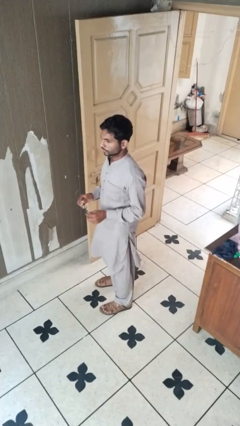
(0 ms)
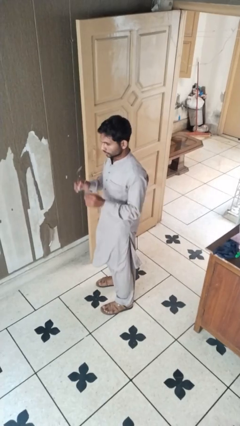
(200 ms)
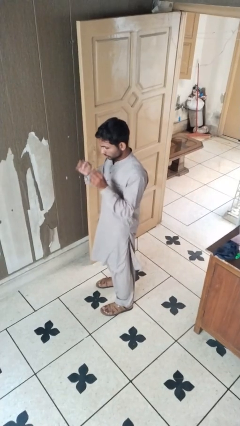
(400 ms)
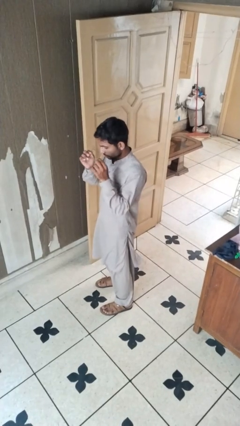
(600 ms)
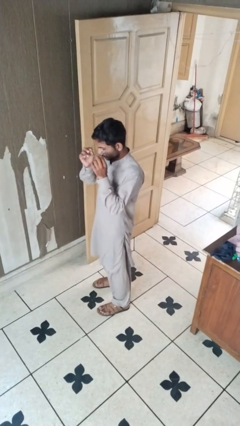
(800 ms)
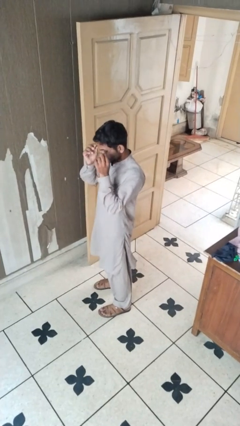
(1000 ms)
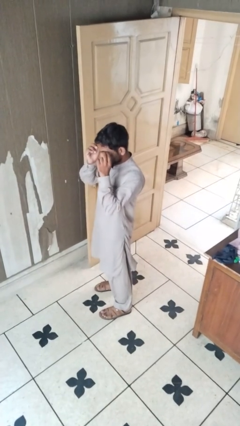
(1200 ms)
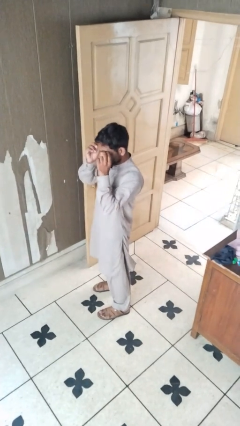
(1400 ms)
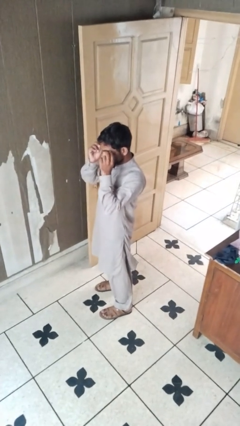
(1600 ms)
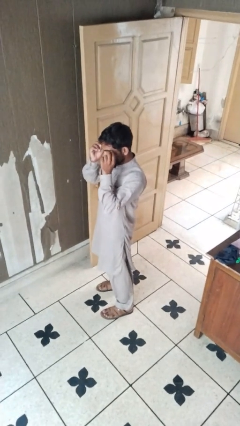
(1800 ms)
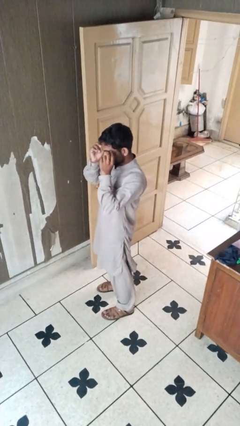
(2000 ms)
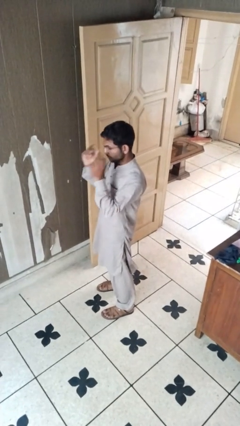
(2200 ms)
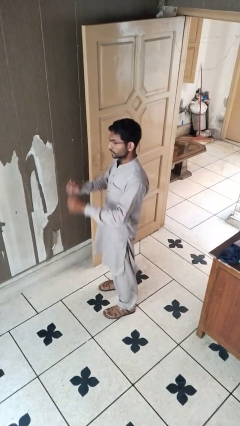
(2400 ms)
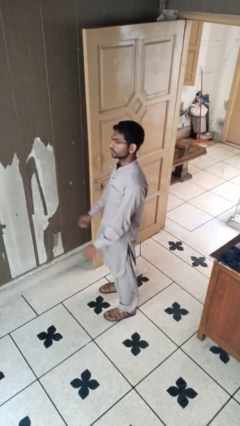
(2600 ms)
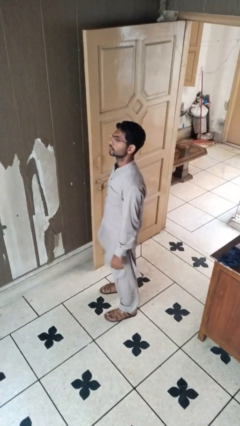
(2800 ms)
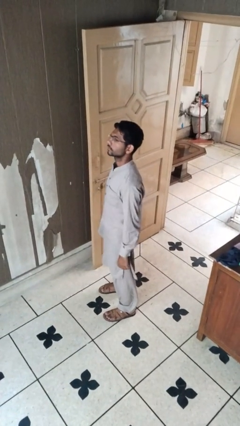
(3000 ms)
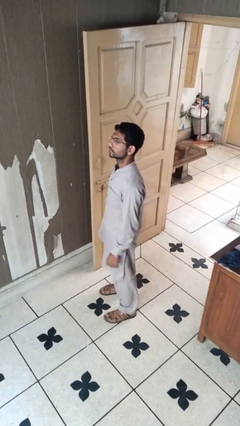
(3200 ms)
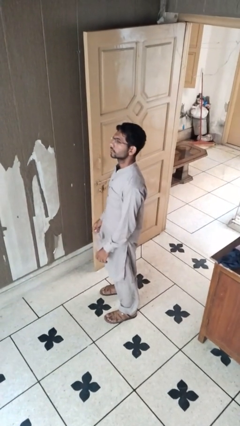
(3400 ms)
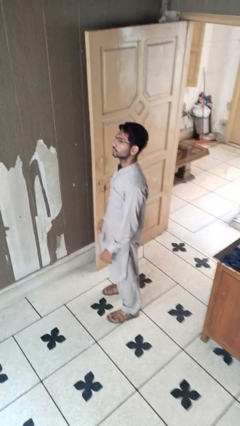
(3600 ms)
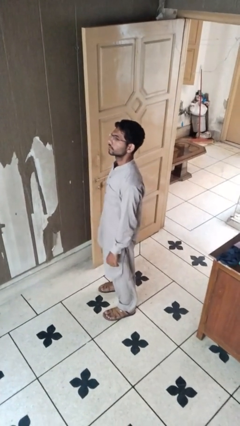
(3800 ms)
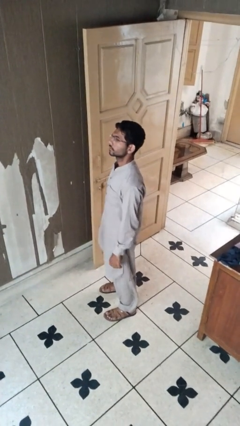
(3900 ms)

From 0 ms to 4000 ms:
person puts on glasses

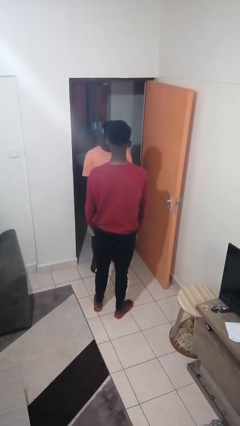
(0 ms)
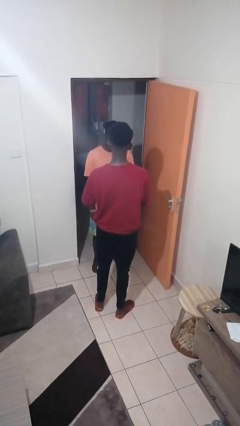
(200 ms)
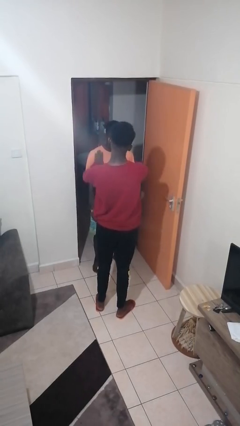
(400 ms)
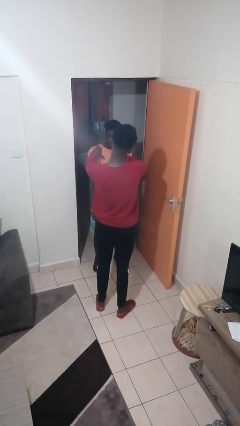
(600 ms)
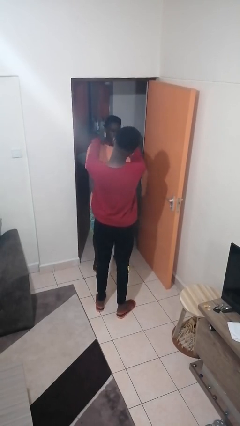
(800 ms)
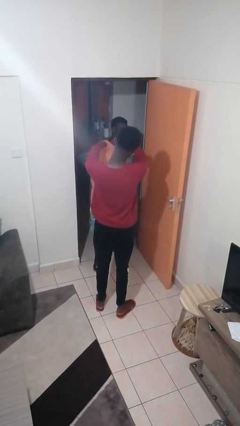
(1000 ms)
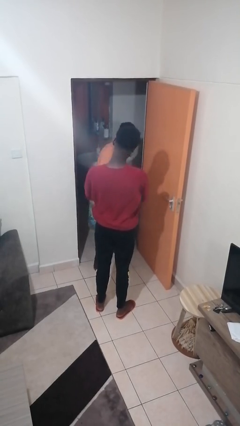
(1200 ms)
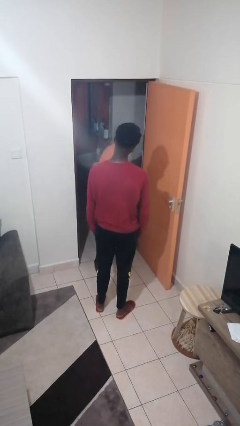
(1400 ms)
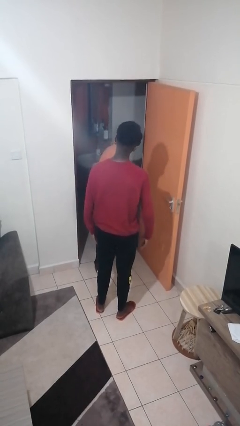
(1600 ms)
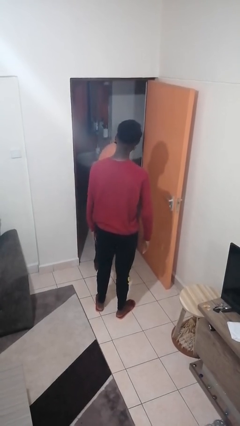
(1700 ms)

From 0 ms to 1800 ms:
person shoves person

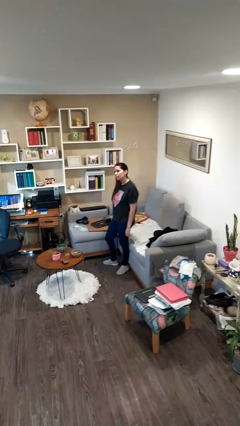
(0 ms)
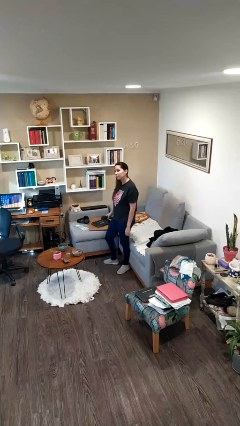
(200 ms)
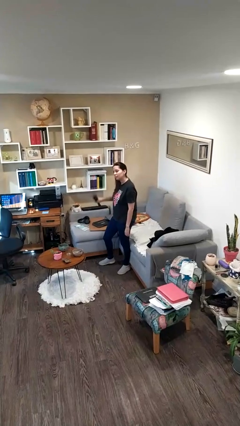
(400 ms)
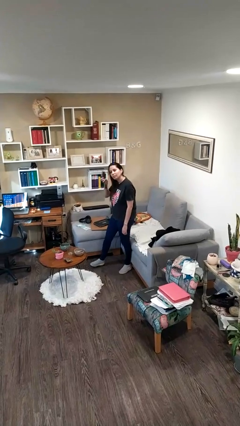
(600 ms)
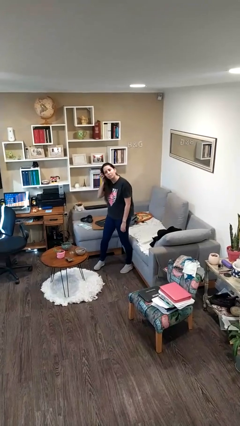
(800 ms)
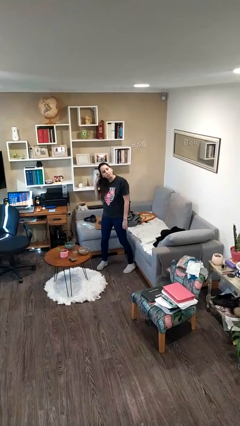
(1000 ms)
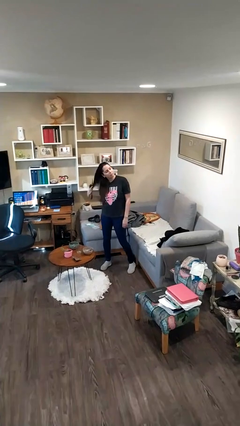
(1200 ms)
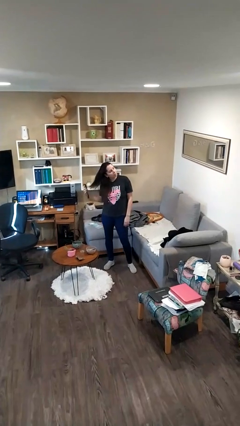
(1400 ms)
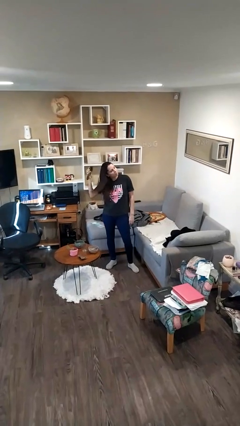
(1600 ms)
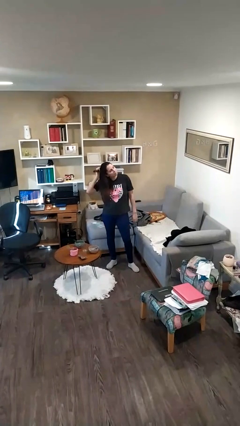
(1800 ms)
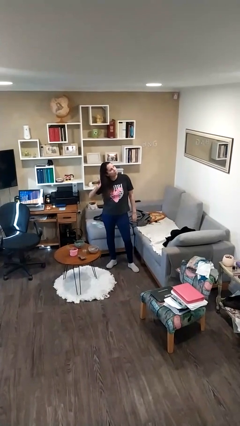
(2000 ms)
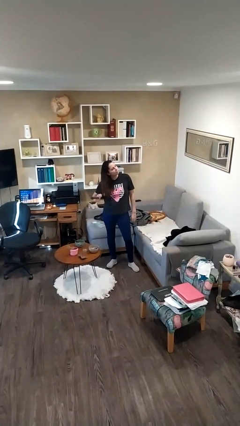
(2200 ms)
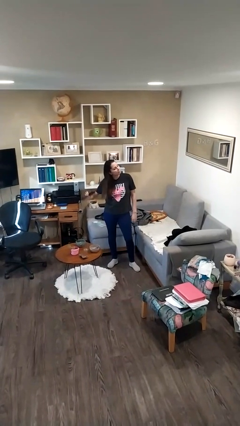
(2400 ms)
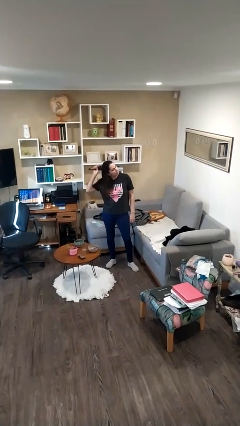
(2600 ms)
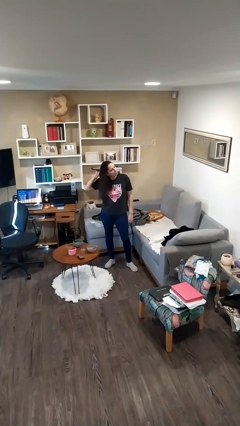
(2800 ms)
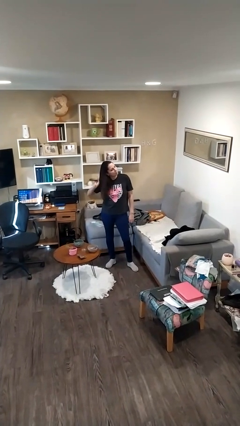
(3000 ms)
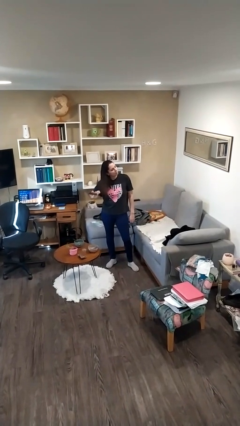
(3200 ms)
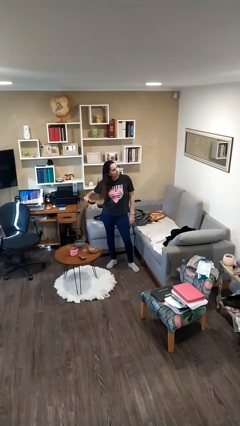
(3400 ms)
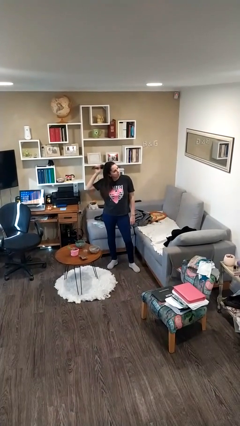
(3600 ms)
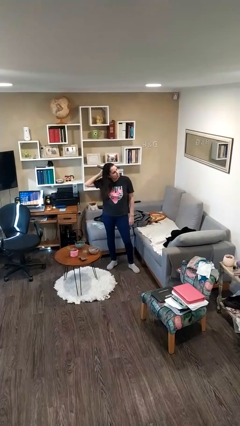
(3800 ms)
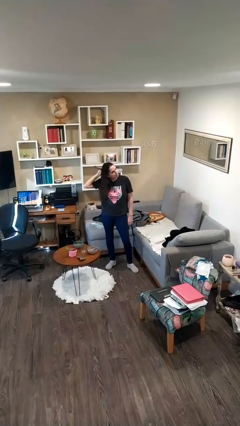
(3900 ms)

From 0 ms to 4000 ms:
person brushes hair

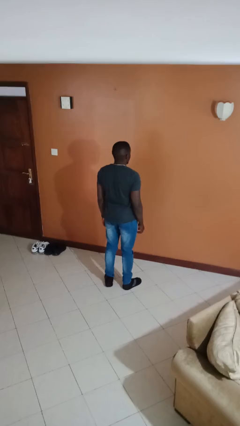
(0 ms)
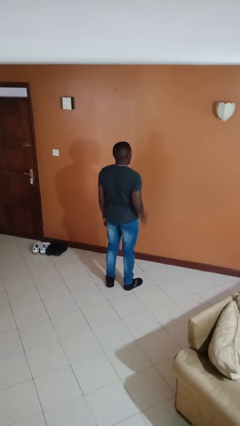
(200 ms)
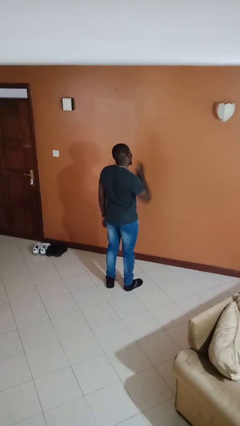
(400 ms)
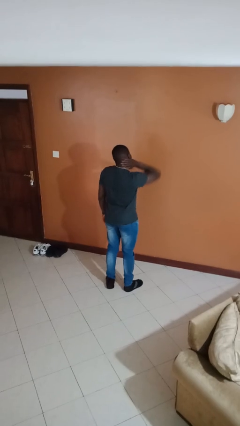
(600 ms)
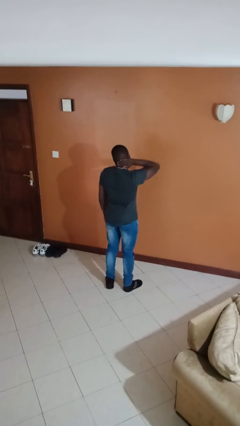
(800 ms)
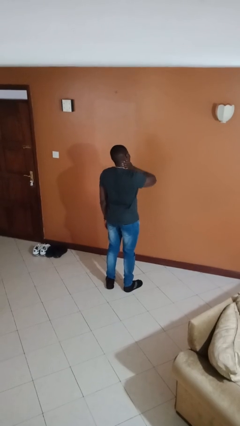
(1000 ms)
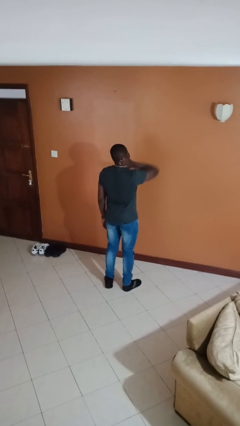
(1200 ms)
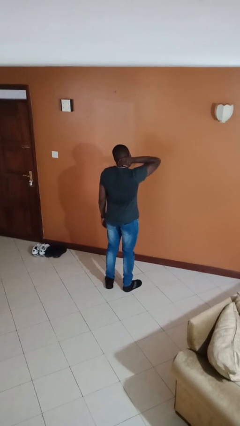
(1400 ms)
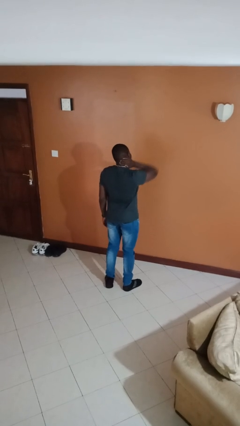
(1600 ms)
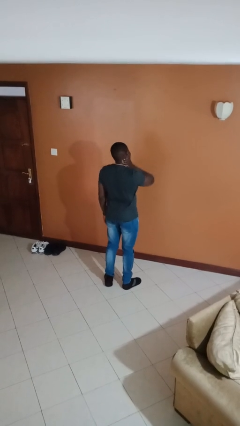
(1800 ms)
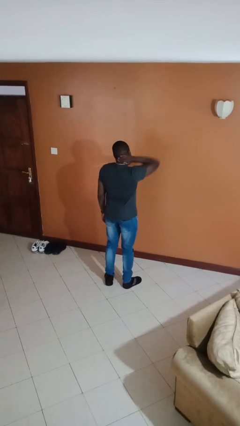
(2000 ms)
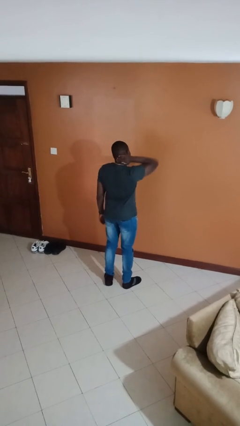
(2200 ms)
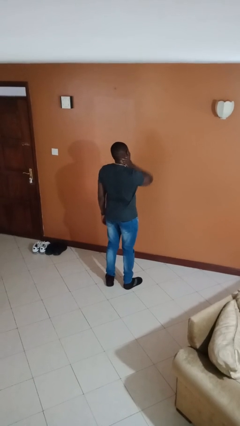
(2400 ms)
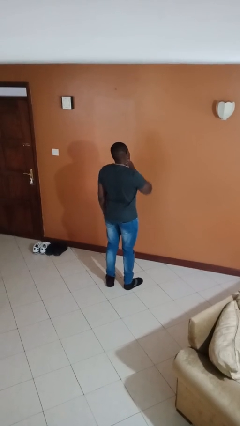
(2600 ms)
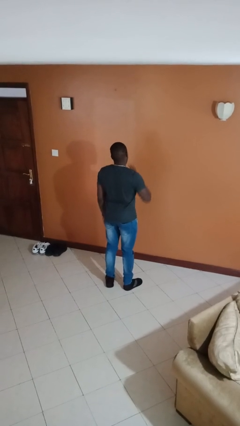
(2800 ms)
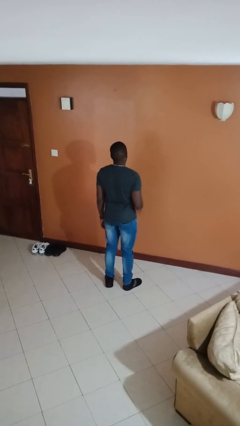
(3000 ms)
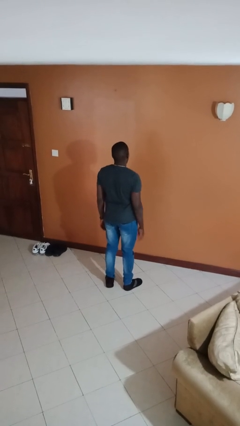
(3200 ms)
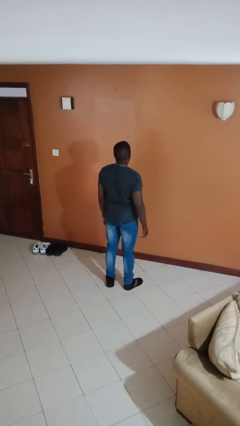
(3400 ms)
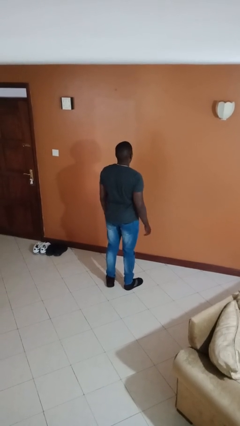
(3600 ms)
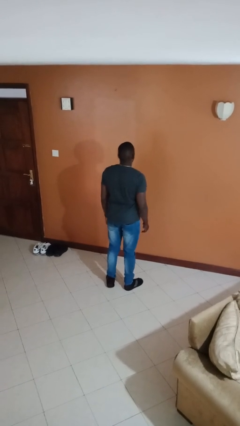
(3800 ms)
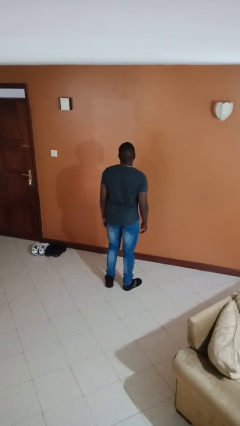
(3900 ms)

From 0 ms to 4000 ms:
person rubs neck

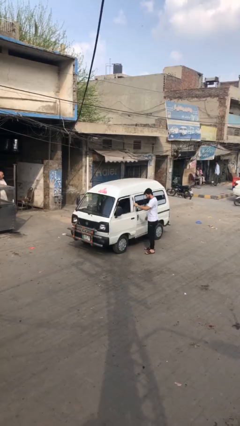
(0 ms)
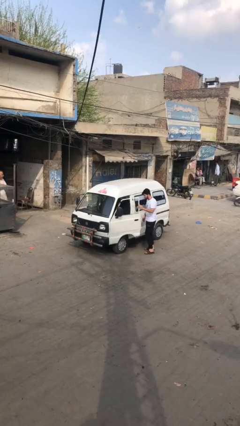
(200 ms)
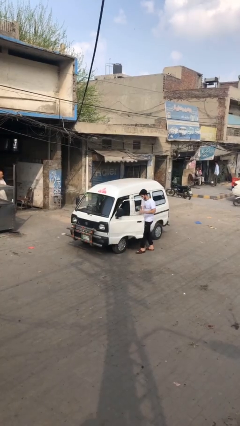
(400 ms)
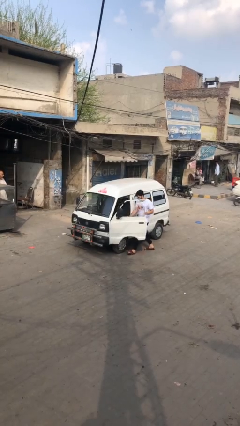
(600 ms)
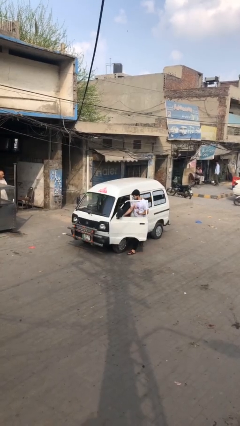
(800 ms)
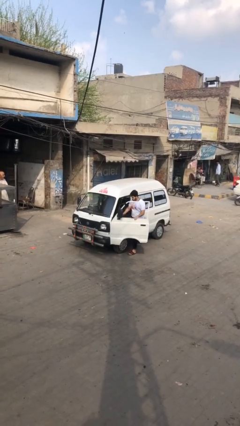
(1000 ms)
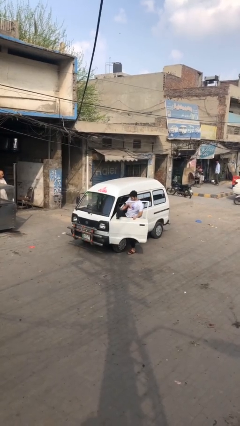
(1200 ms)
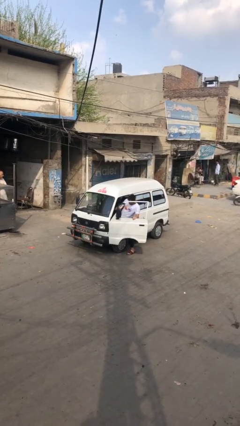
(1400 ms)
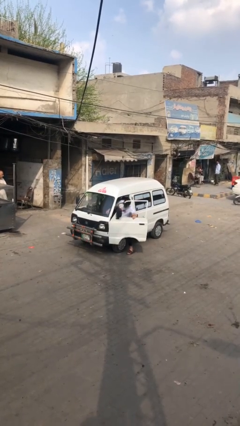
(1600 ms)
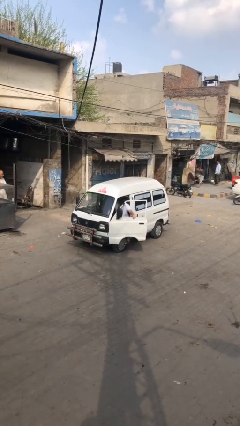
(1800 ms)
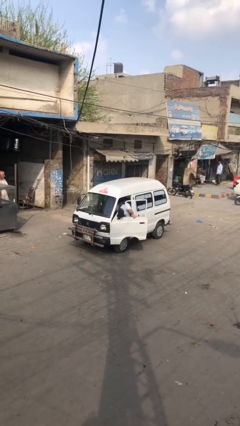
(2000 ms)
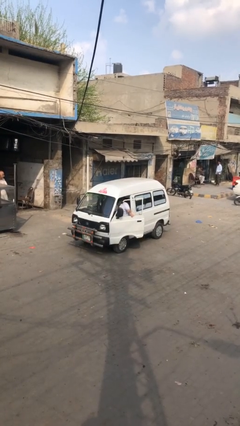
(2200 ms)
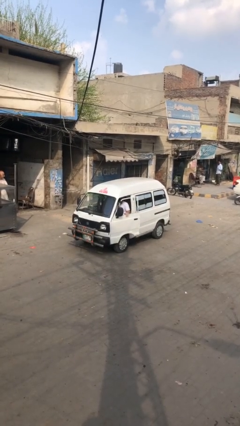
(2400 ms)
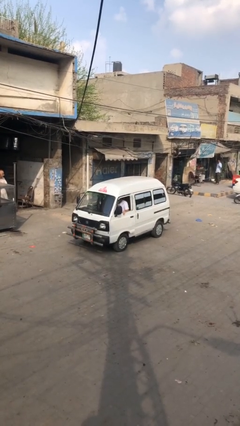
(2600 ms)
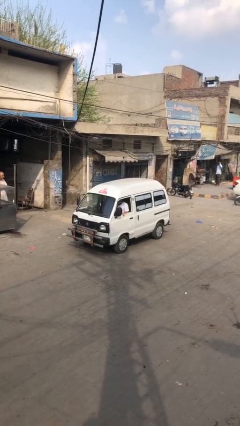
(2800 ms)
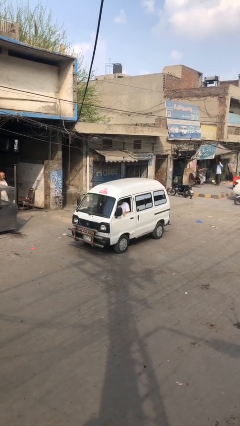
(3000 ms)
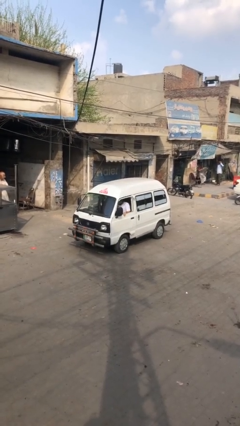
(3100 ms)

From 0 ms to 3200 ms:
car picks up person

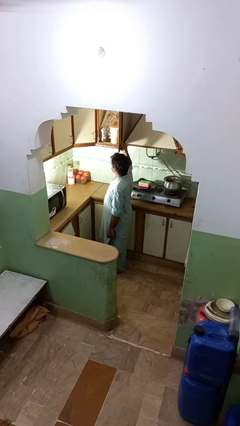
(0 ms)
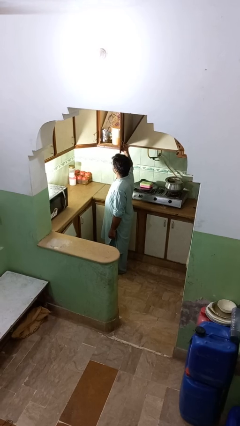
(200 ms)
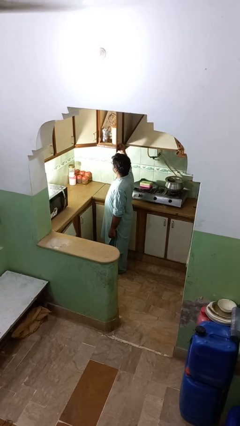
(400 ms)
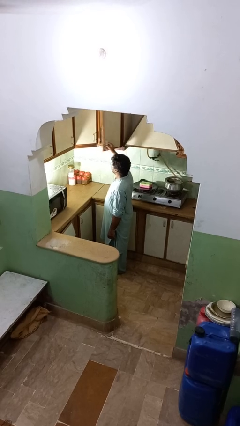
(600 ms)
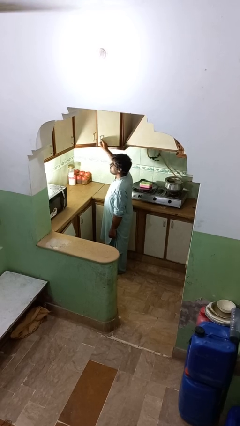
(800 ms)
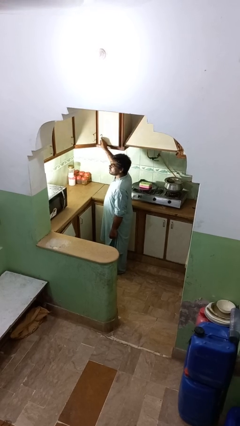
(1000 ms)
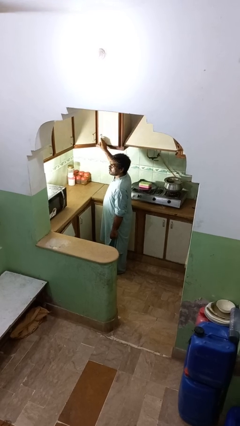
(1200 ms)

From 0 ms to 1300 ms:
person closes kitchen drawer
